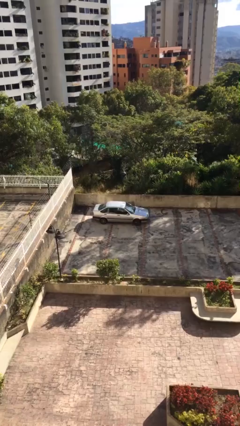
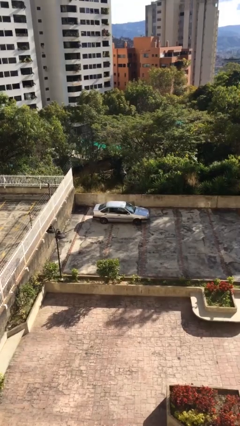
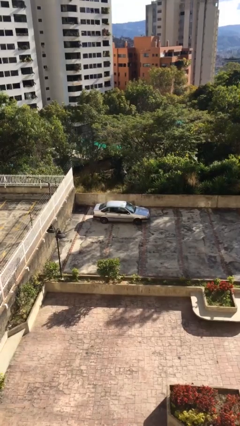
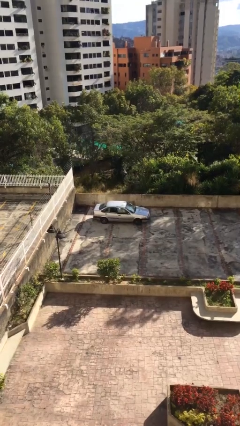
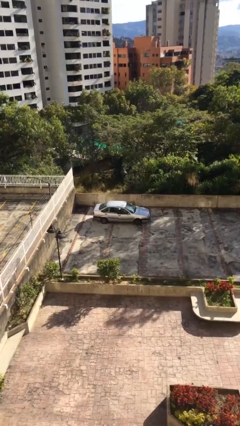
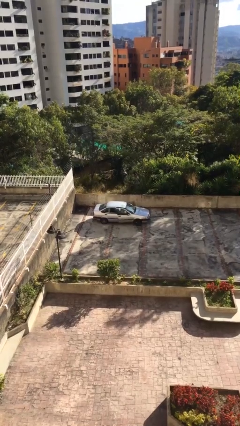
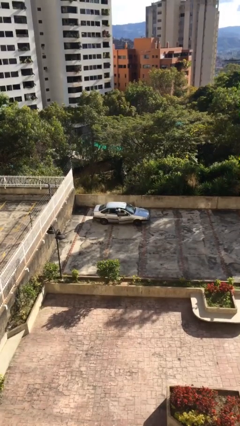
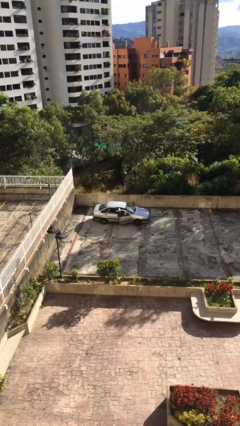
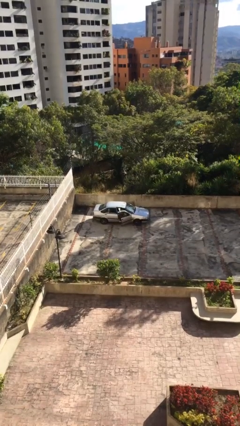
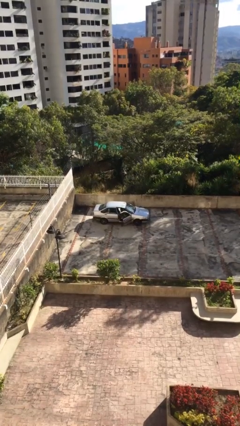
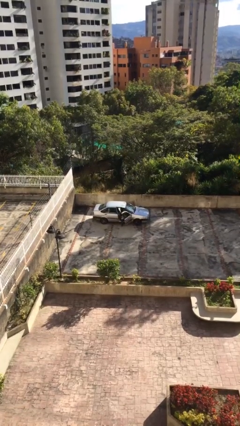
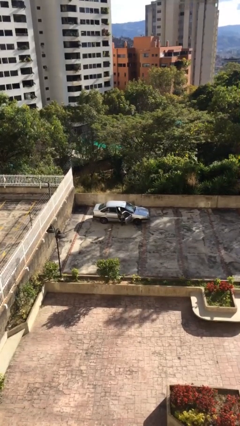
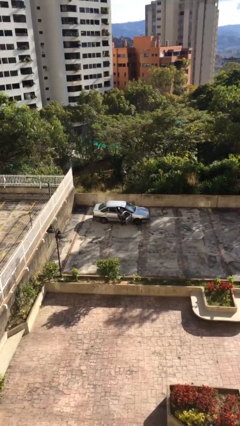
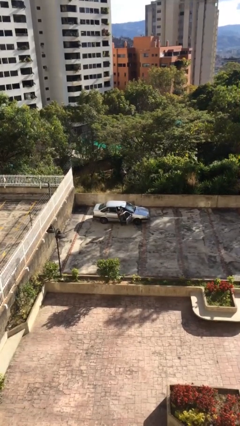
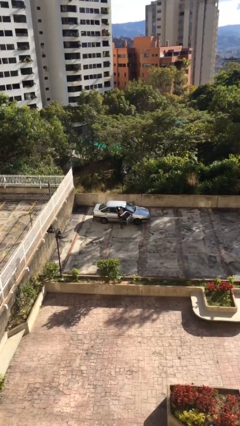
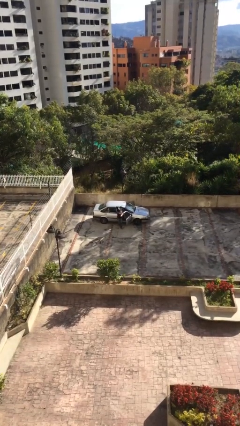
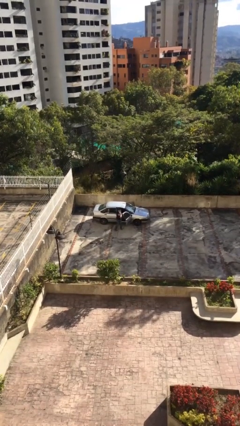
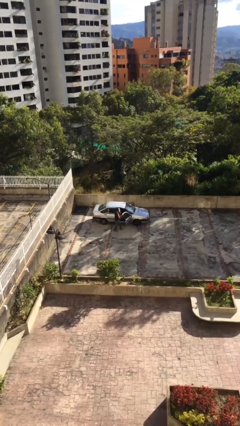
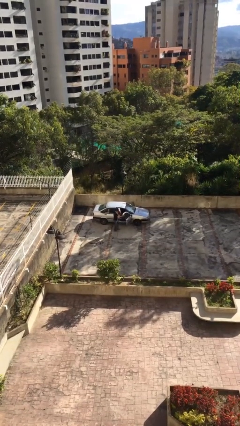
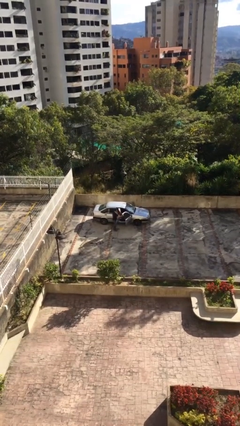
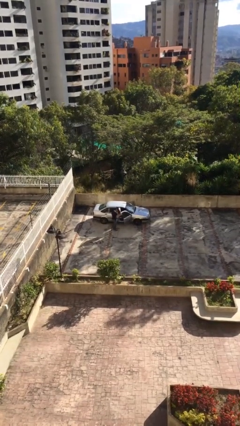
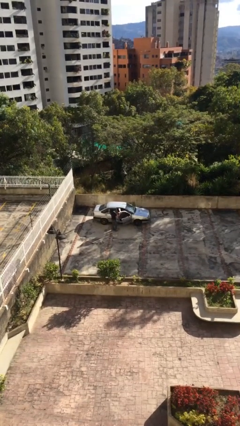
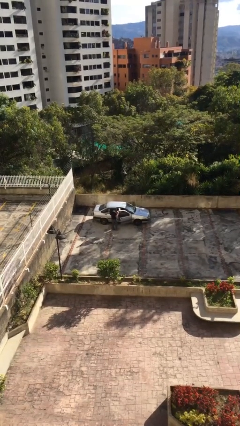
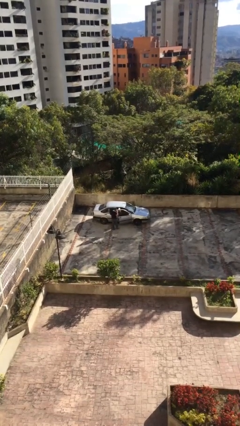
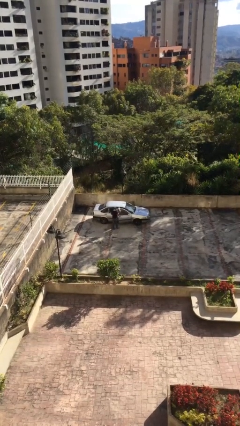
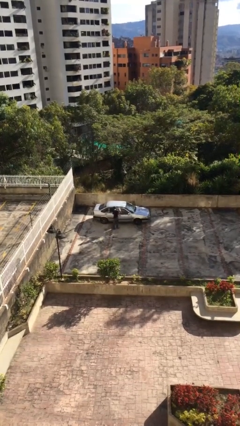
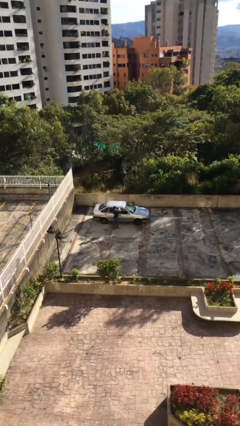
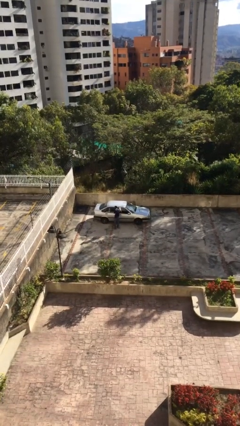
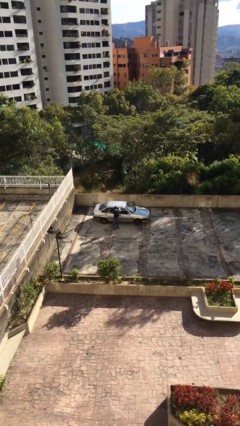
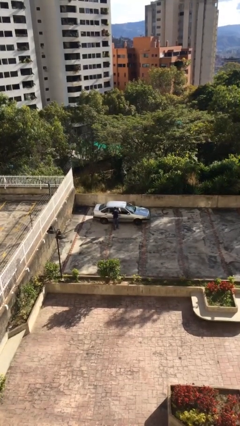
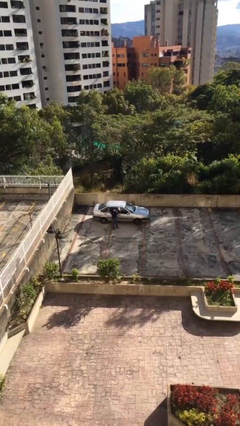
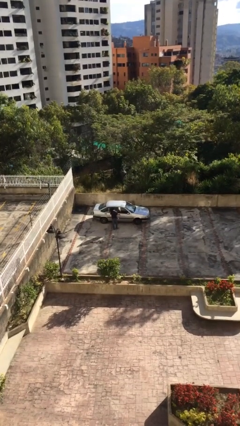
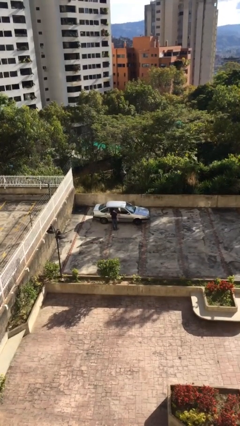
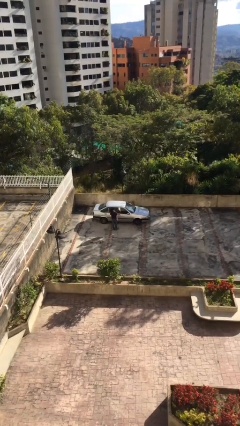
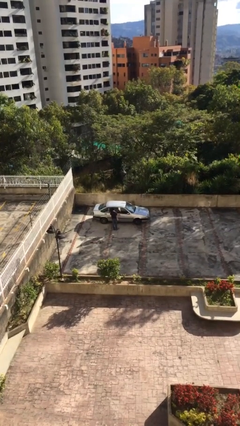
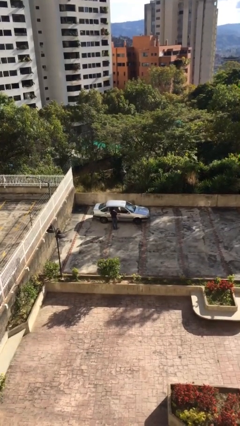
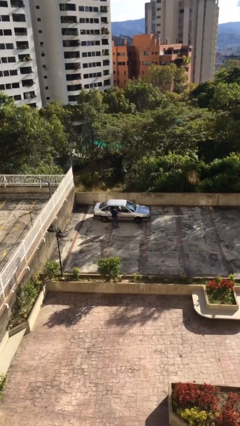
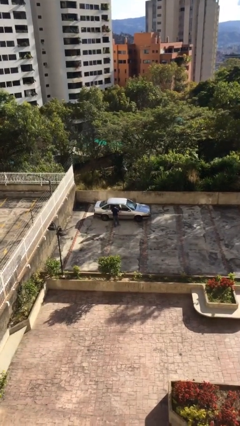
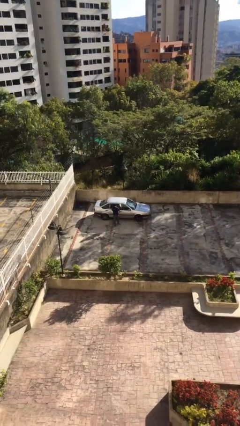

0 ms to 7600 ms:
car drops off person

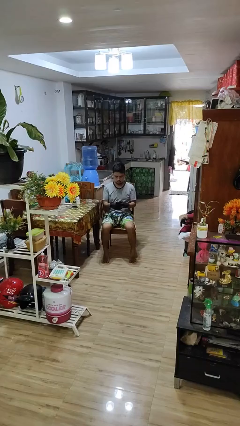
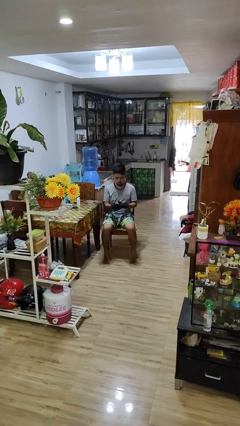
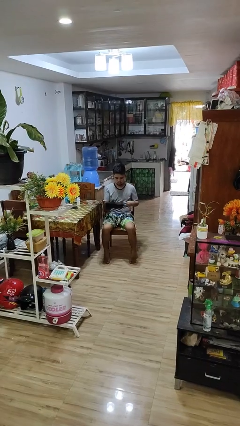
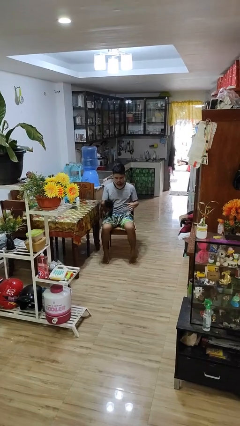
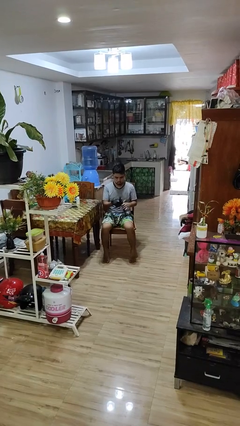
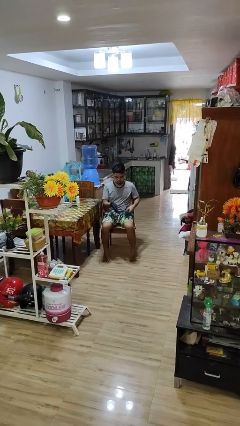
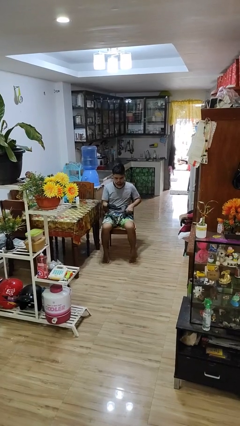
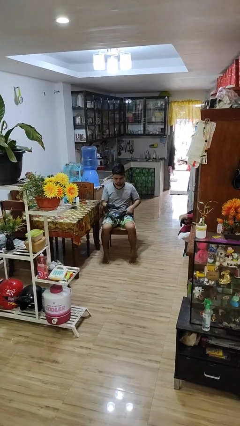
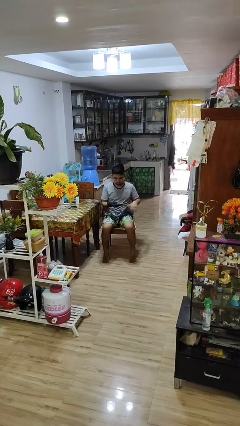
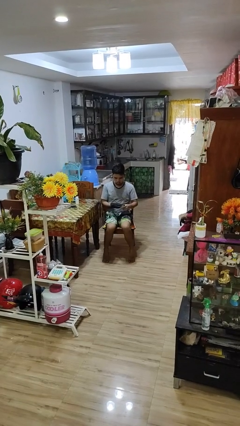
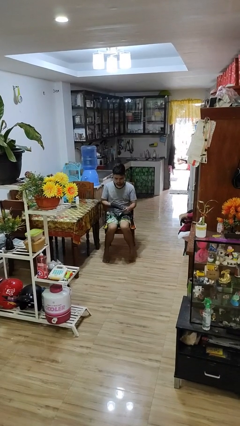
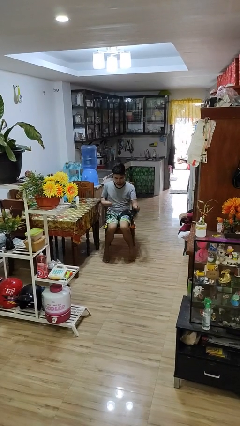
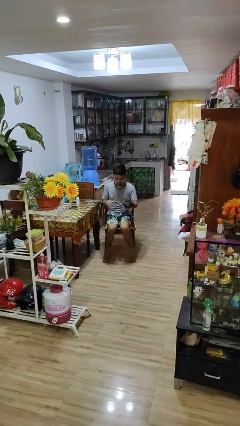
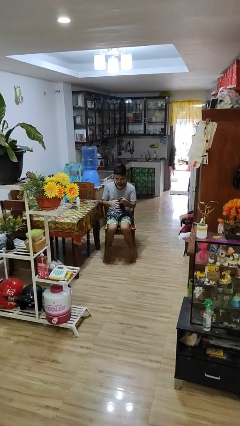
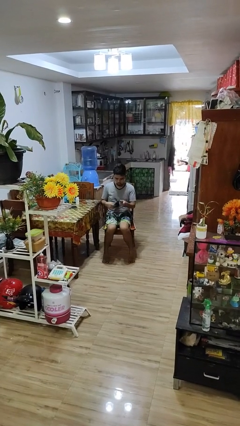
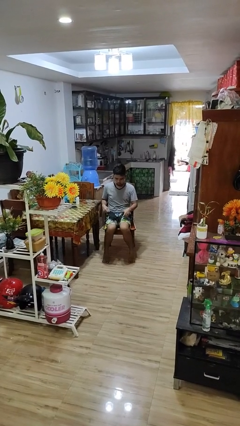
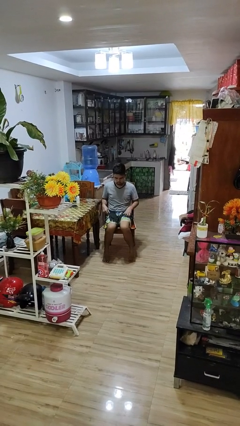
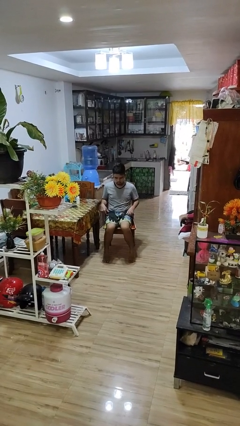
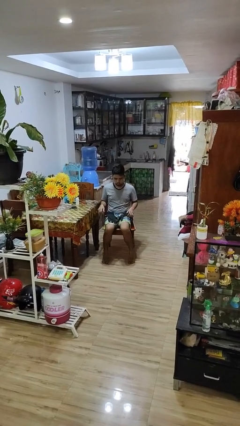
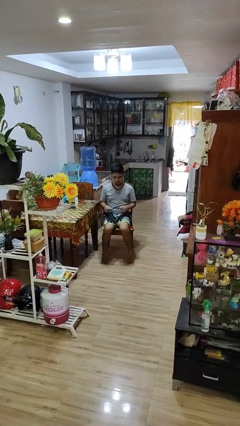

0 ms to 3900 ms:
person takes off gloves

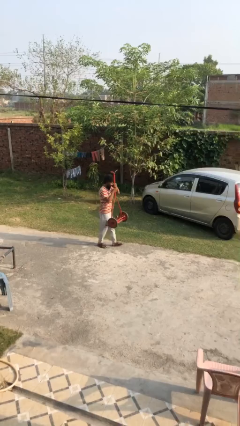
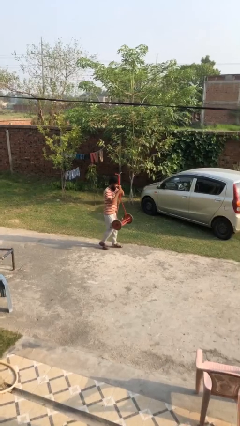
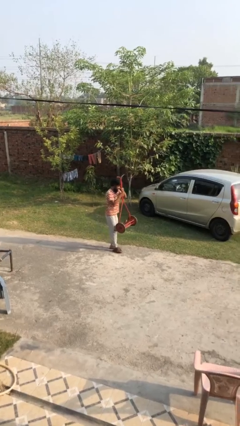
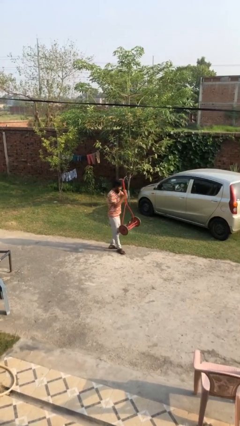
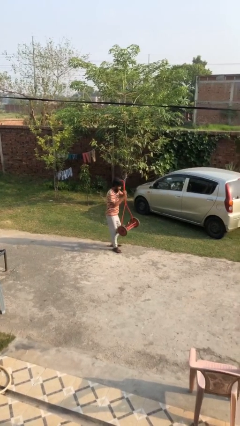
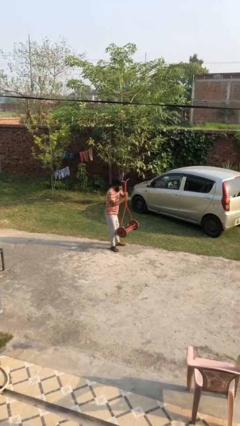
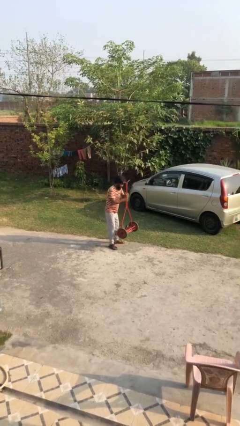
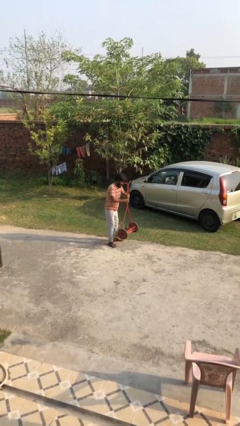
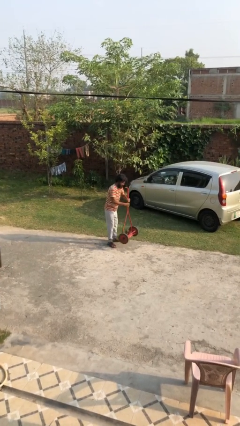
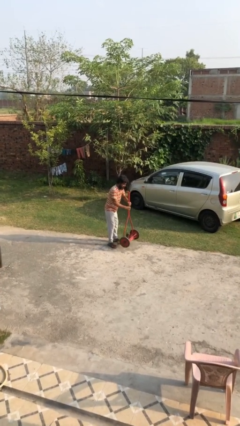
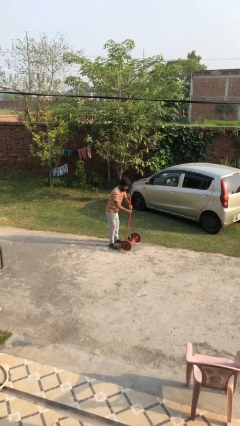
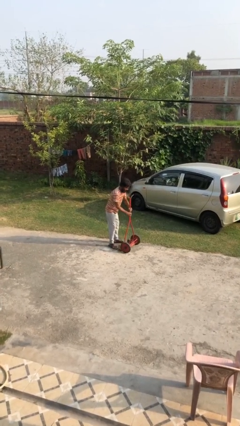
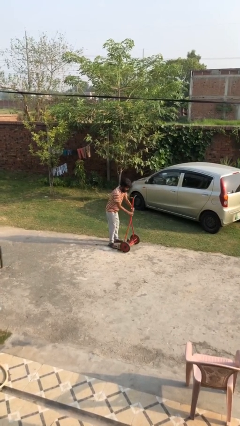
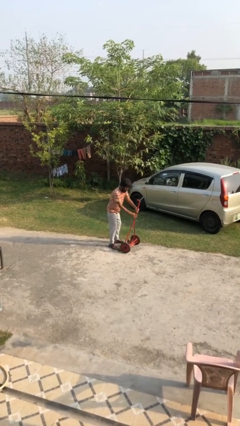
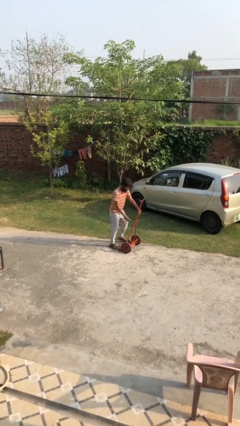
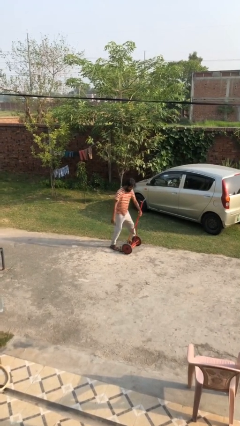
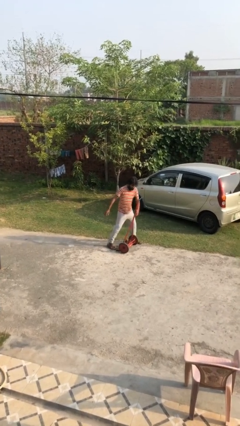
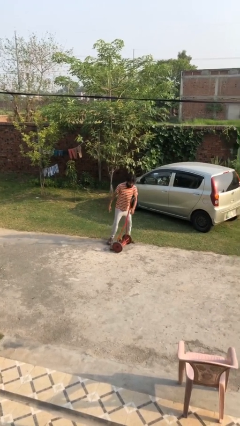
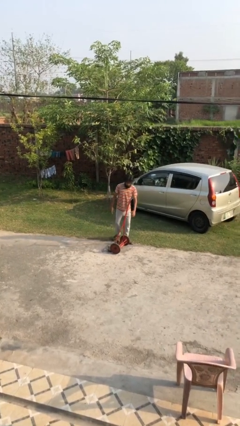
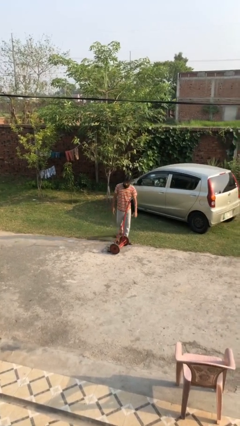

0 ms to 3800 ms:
person puts down object on floor

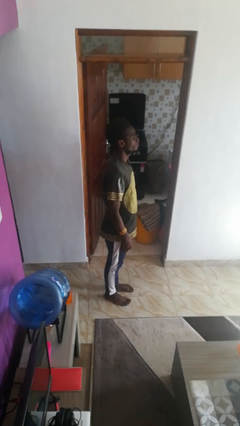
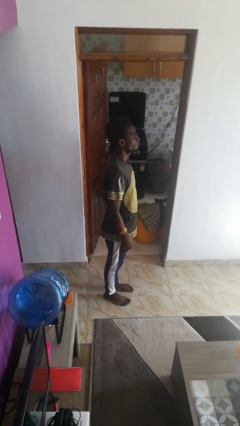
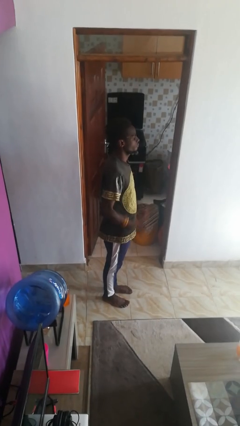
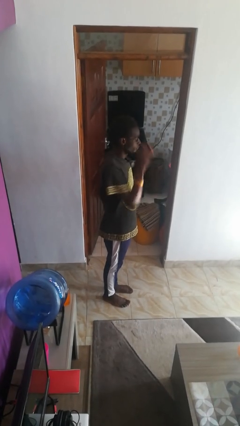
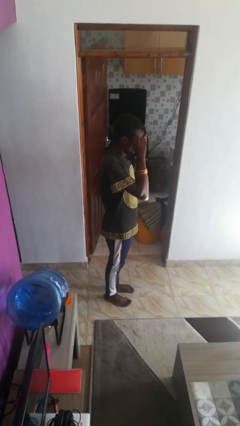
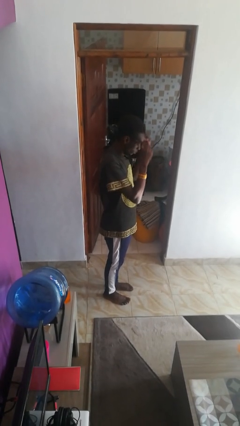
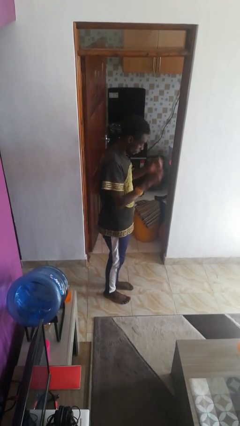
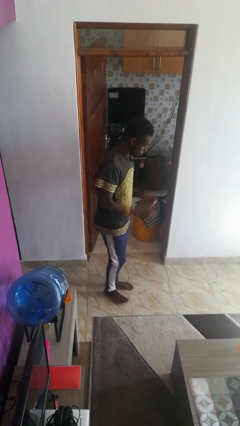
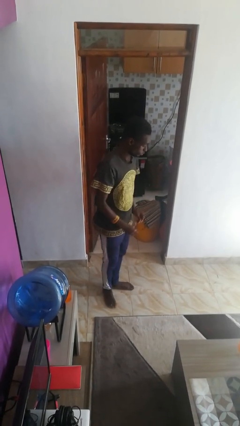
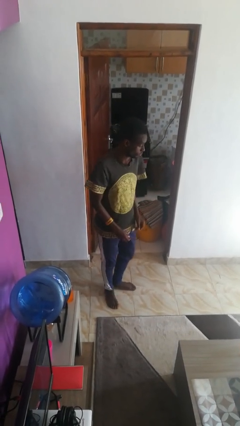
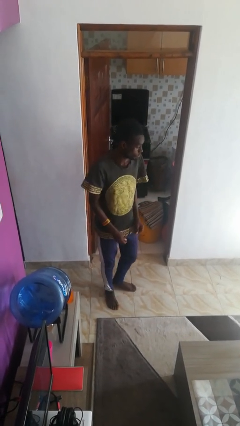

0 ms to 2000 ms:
person takes off glasses

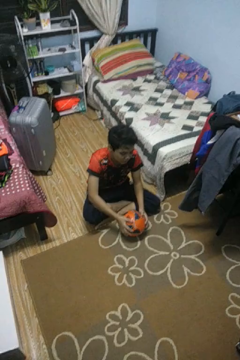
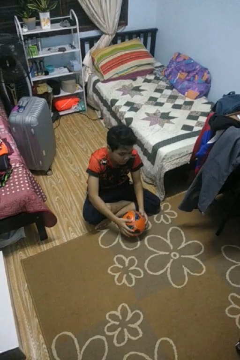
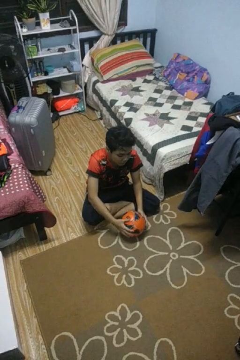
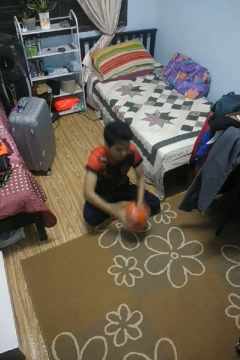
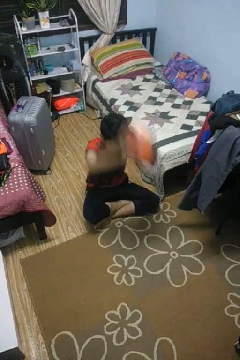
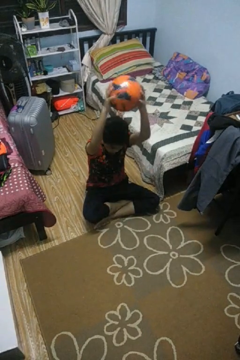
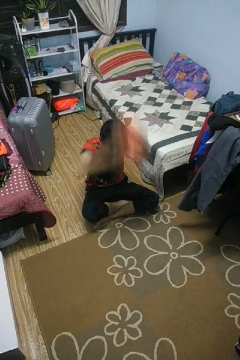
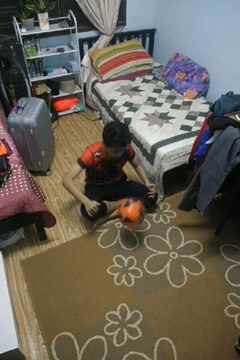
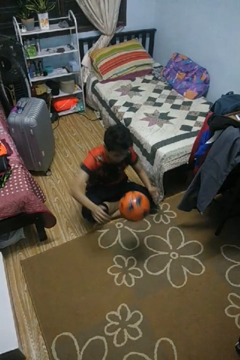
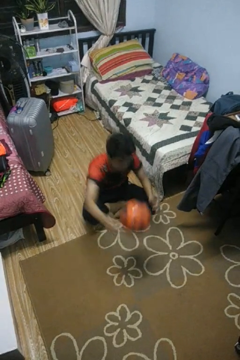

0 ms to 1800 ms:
person bounces ball on floor
